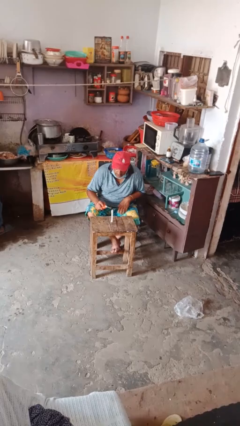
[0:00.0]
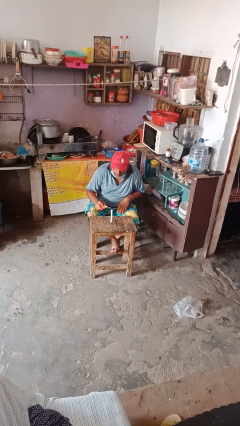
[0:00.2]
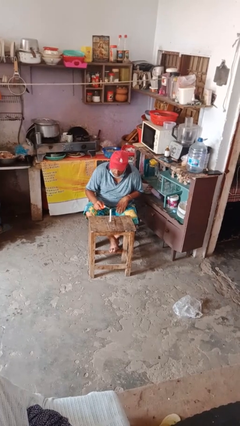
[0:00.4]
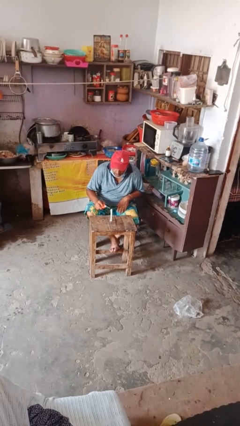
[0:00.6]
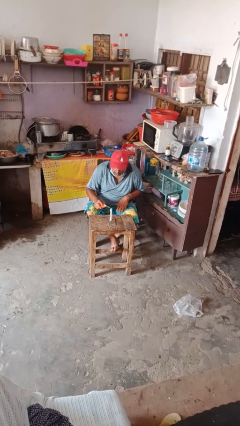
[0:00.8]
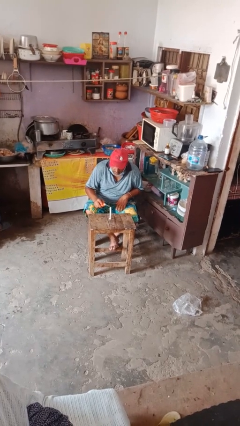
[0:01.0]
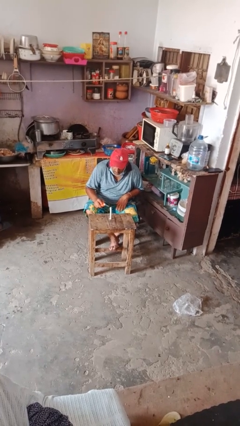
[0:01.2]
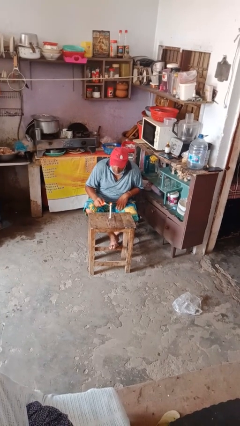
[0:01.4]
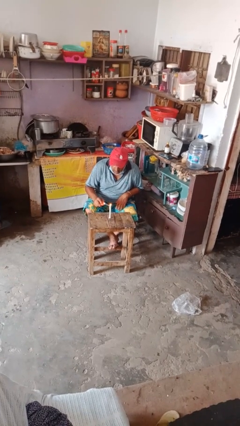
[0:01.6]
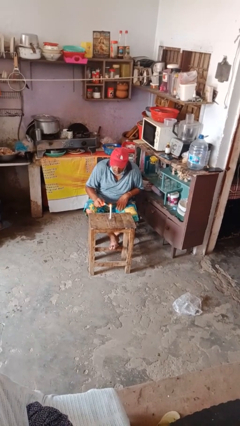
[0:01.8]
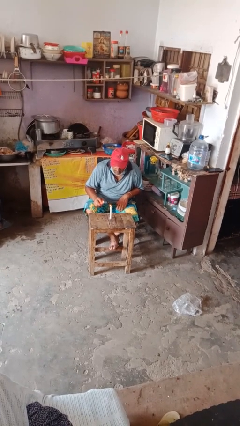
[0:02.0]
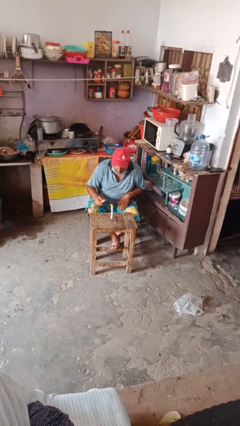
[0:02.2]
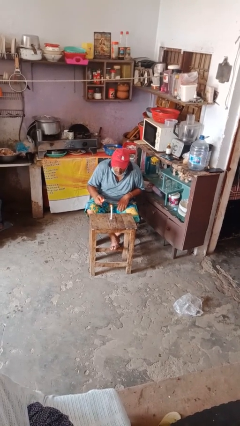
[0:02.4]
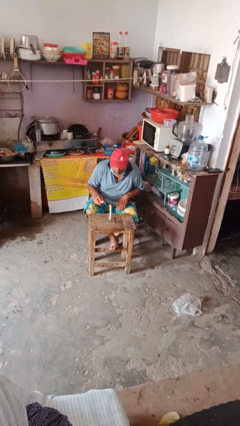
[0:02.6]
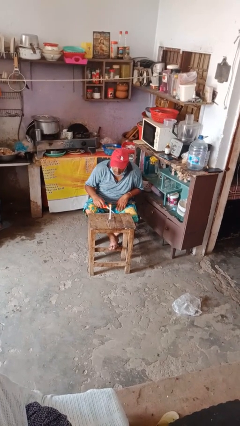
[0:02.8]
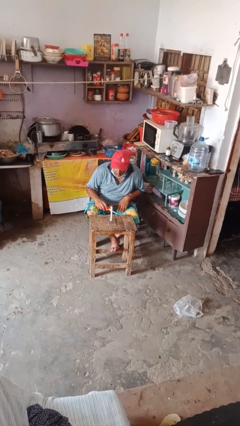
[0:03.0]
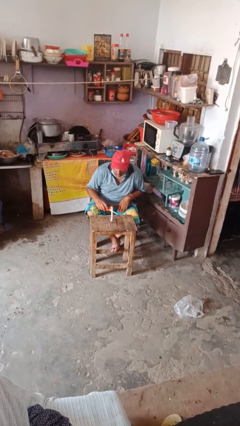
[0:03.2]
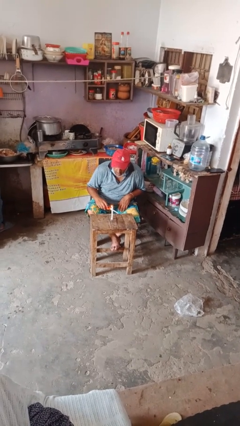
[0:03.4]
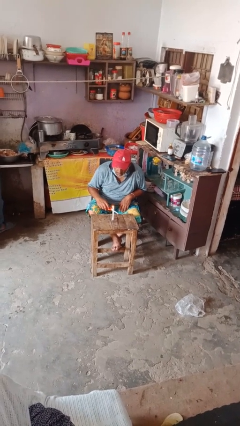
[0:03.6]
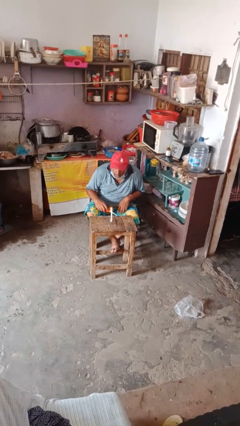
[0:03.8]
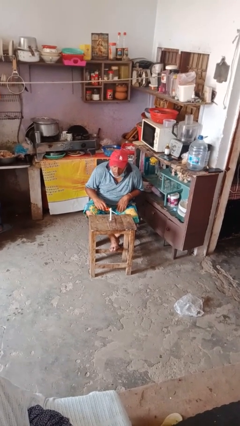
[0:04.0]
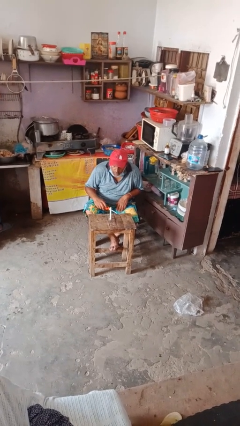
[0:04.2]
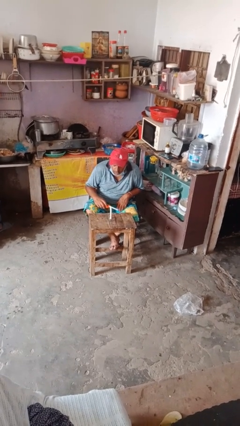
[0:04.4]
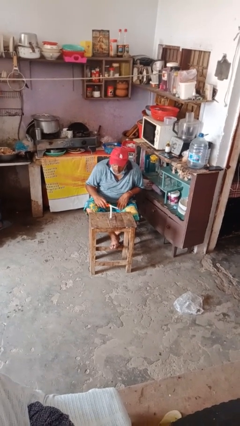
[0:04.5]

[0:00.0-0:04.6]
person lights candle

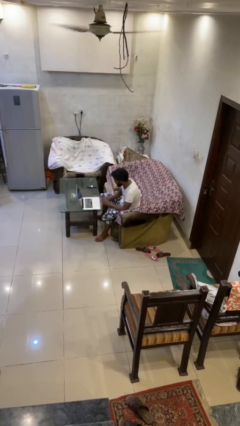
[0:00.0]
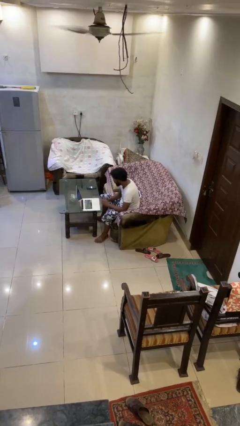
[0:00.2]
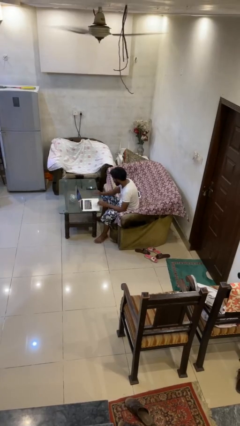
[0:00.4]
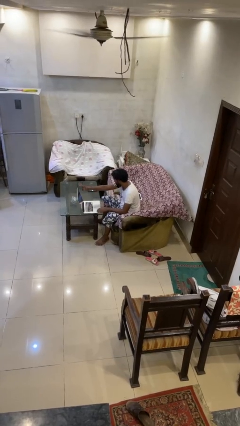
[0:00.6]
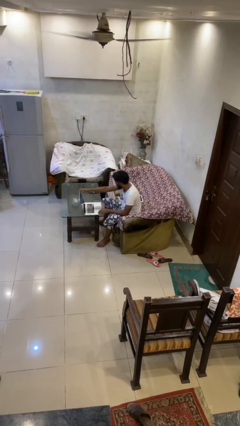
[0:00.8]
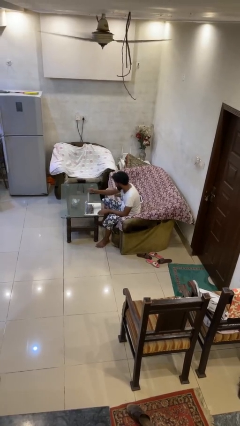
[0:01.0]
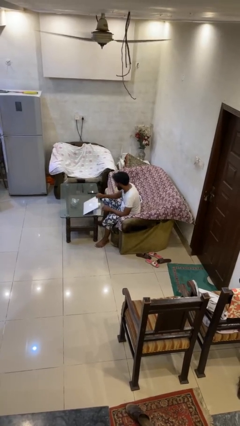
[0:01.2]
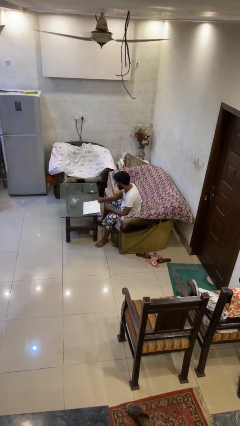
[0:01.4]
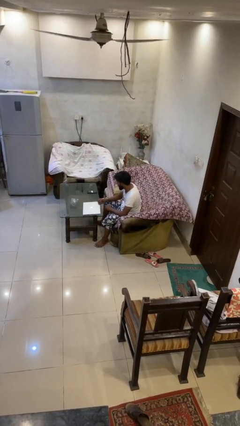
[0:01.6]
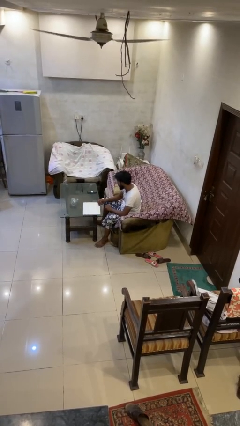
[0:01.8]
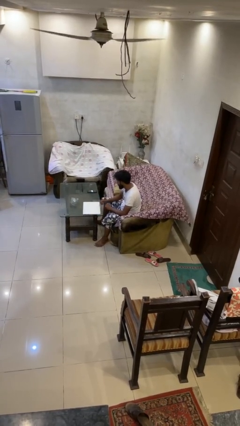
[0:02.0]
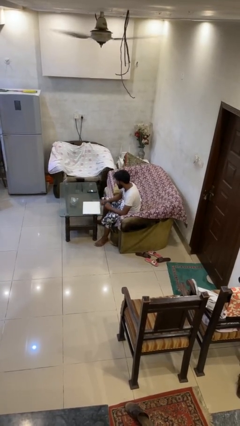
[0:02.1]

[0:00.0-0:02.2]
person closes laptop

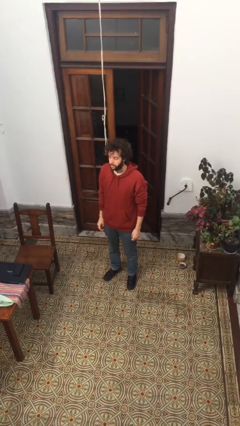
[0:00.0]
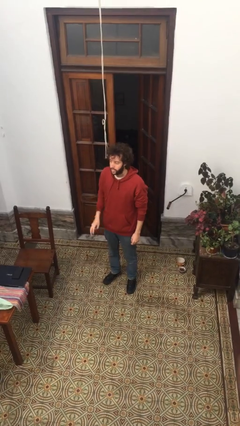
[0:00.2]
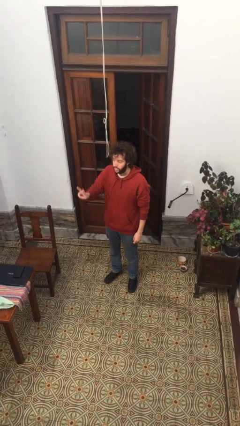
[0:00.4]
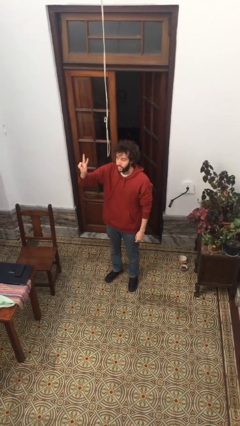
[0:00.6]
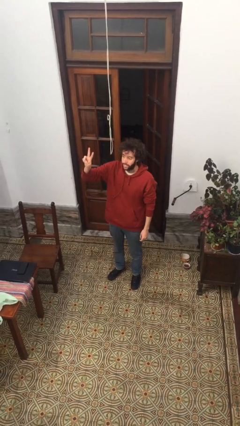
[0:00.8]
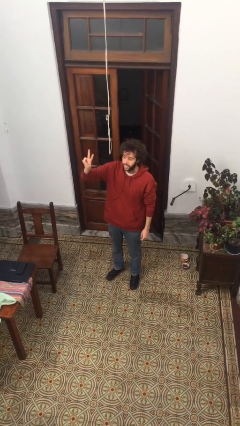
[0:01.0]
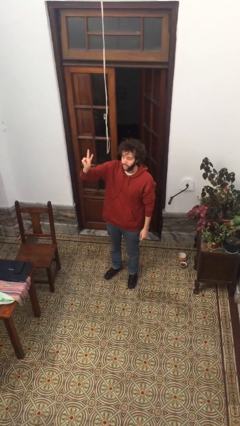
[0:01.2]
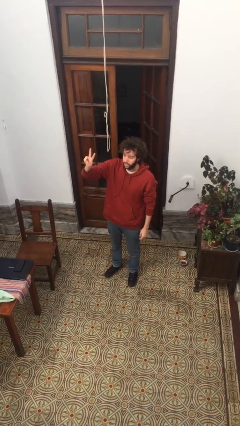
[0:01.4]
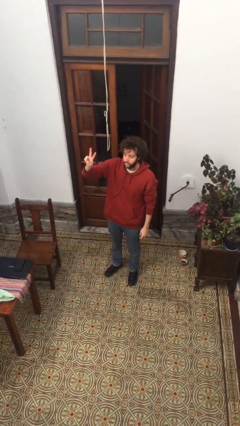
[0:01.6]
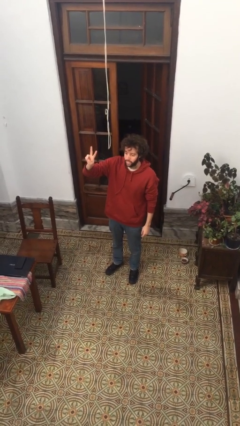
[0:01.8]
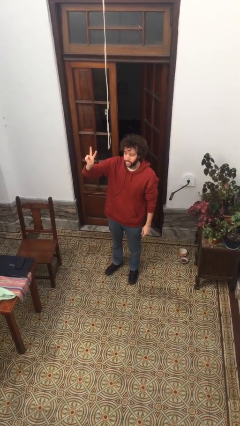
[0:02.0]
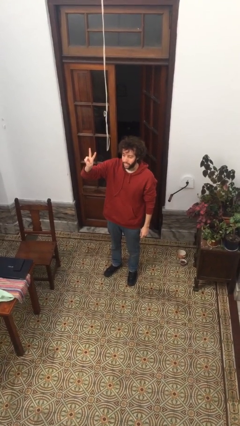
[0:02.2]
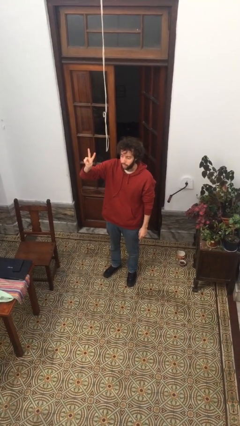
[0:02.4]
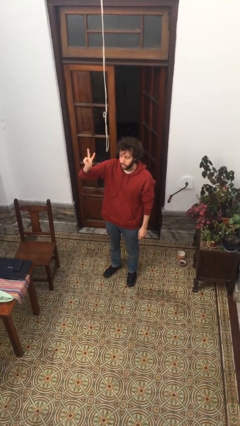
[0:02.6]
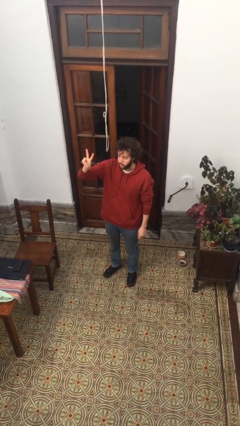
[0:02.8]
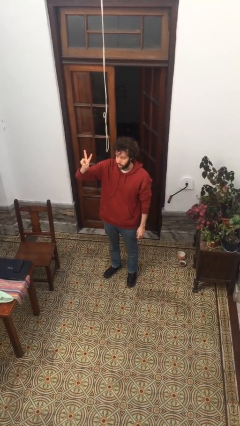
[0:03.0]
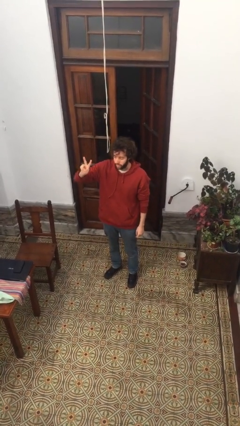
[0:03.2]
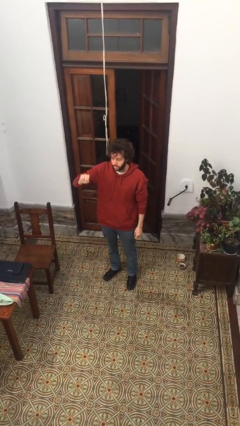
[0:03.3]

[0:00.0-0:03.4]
person gestures peace

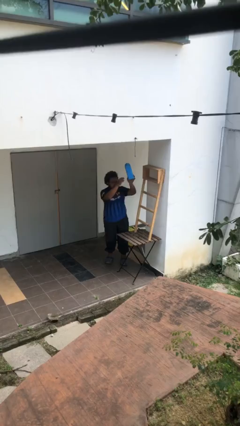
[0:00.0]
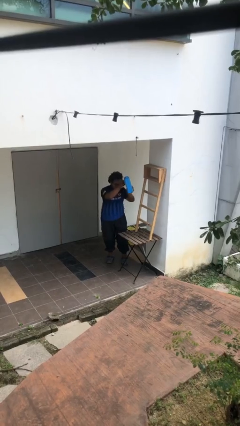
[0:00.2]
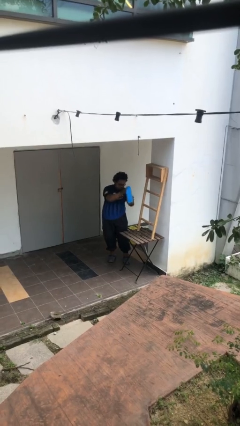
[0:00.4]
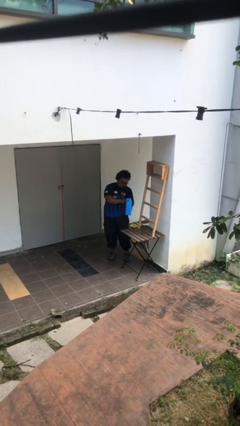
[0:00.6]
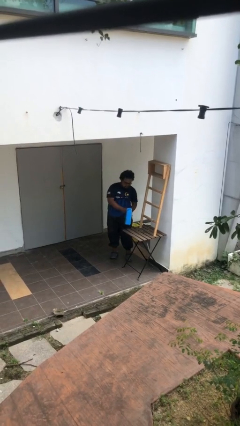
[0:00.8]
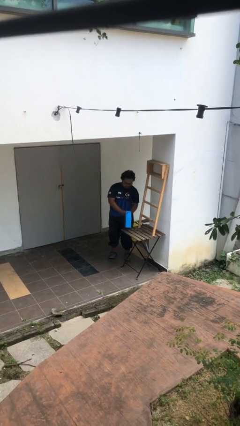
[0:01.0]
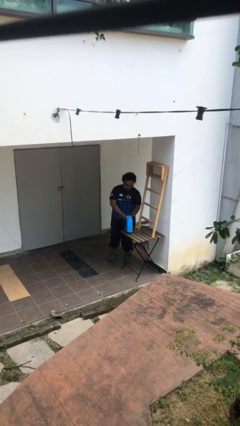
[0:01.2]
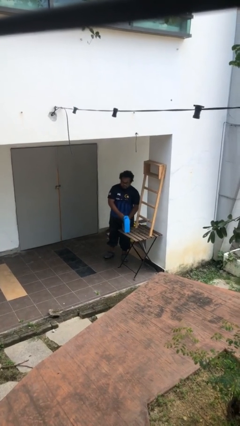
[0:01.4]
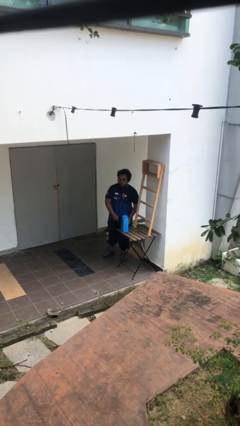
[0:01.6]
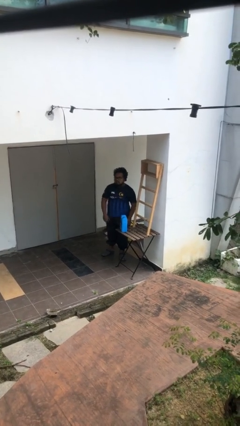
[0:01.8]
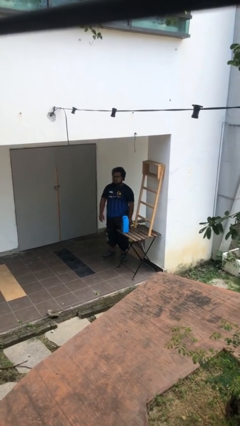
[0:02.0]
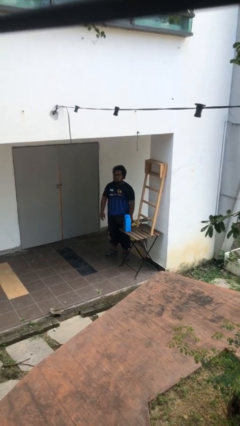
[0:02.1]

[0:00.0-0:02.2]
person puts down object on table

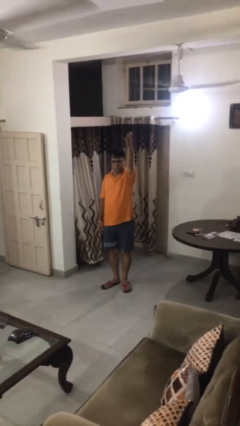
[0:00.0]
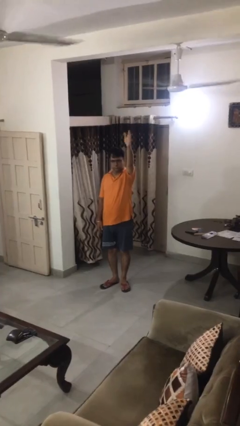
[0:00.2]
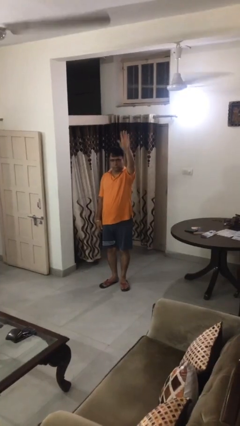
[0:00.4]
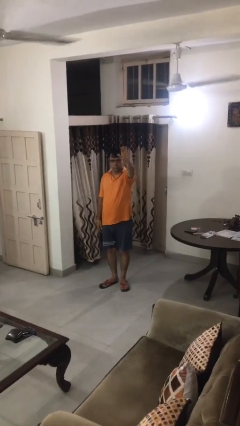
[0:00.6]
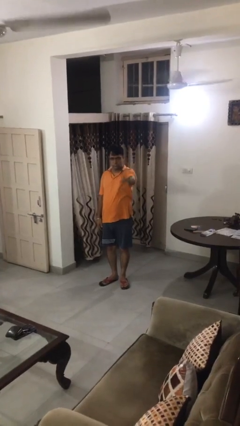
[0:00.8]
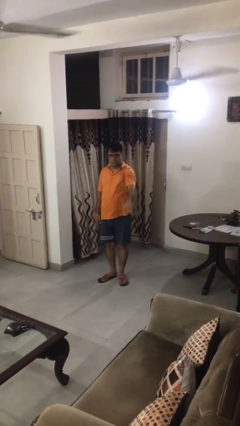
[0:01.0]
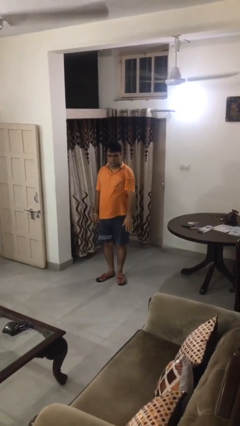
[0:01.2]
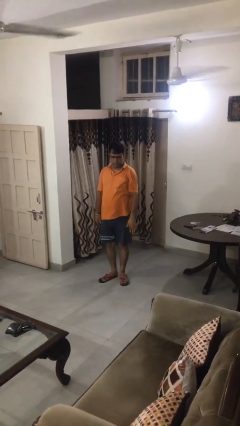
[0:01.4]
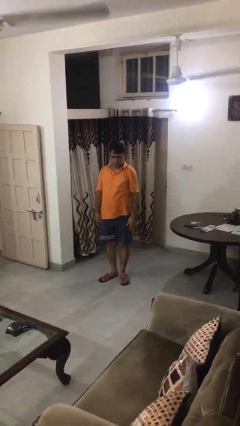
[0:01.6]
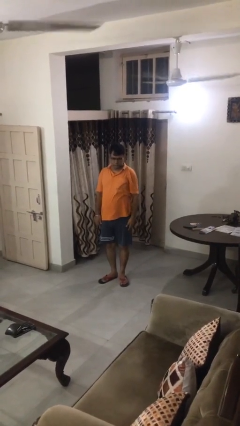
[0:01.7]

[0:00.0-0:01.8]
person gestures swipe down

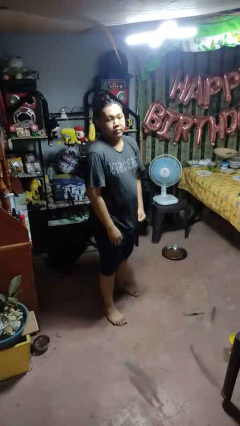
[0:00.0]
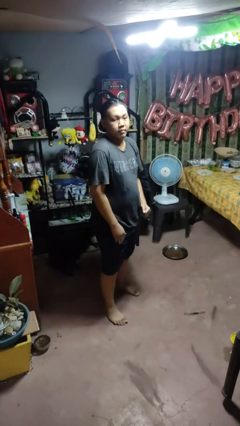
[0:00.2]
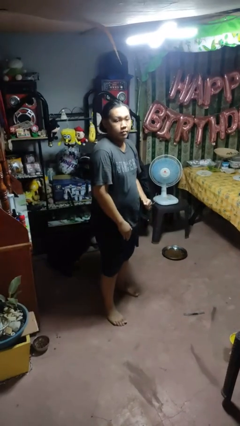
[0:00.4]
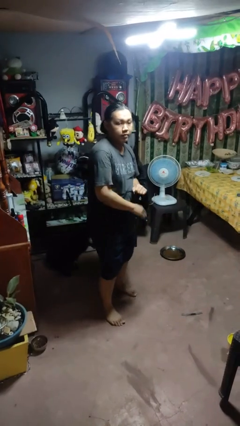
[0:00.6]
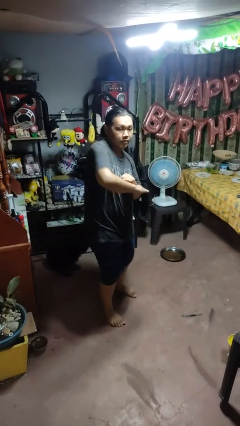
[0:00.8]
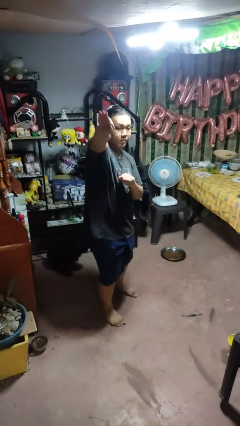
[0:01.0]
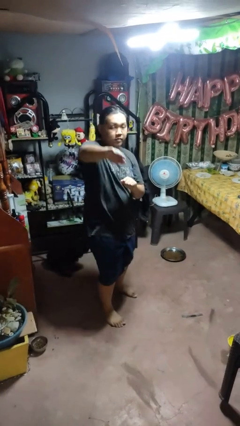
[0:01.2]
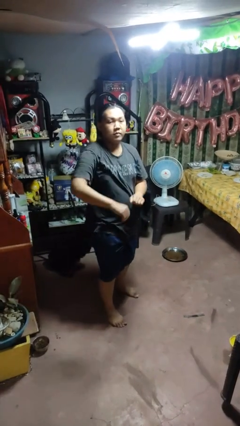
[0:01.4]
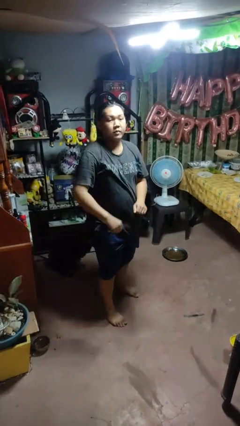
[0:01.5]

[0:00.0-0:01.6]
person karate chop

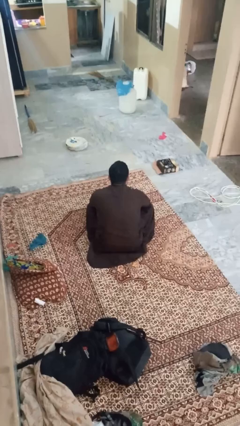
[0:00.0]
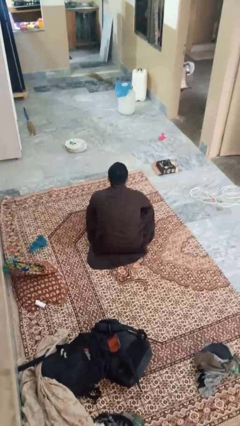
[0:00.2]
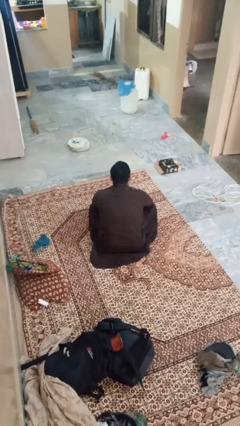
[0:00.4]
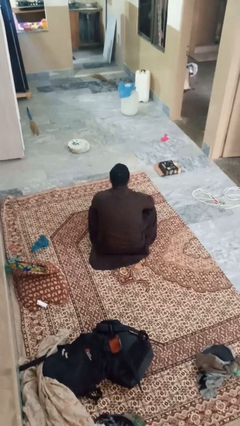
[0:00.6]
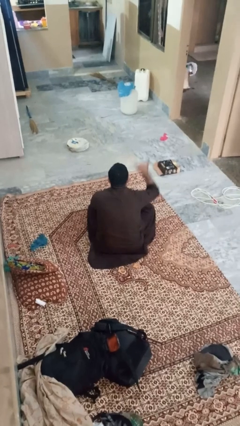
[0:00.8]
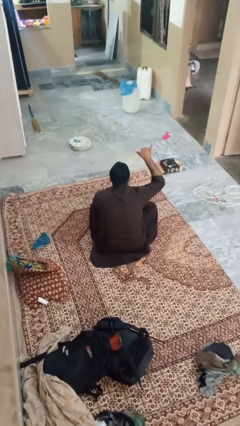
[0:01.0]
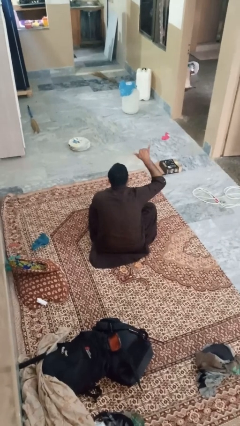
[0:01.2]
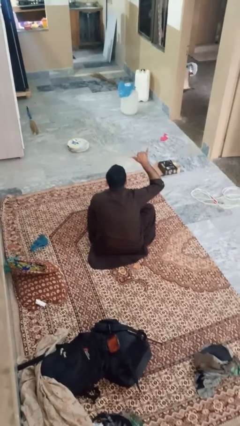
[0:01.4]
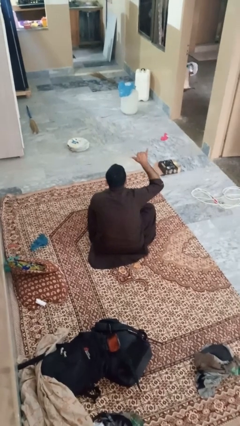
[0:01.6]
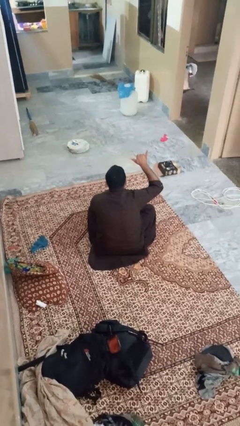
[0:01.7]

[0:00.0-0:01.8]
person gestures hang loose
